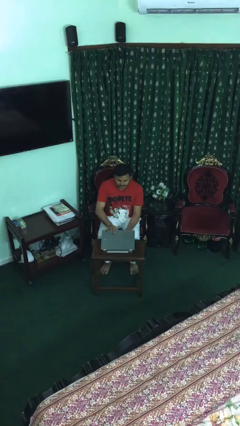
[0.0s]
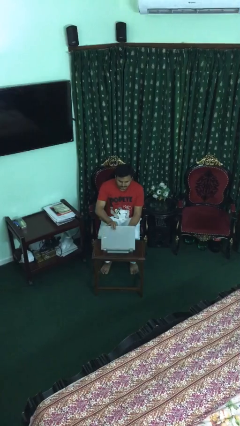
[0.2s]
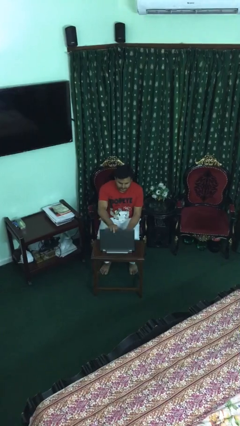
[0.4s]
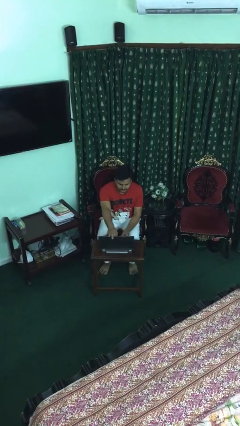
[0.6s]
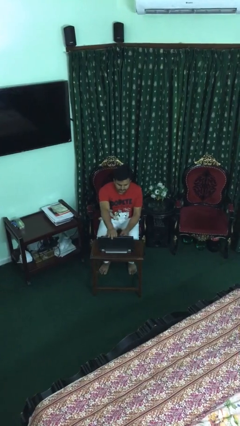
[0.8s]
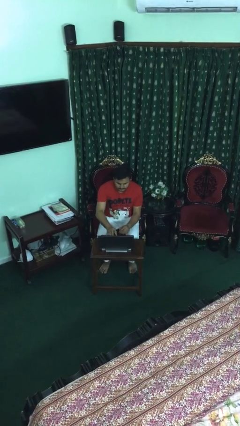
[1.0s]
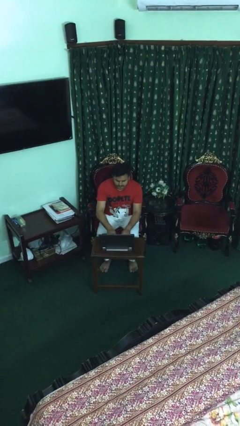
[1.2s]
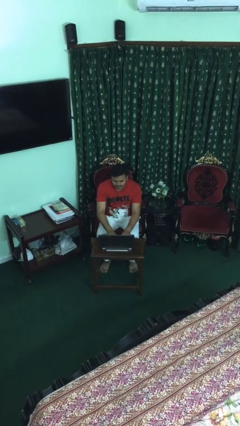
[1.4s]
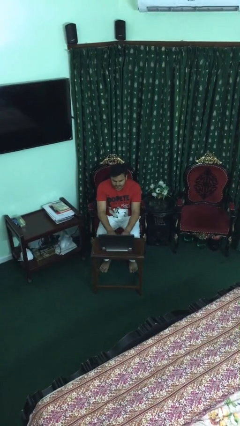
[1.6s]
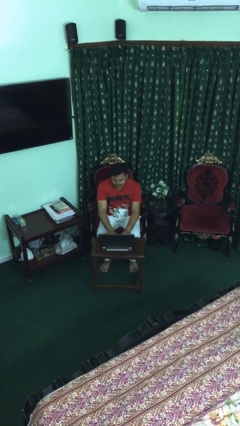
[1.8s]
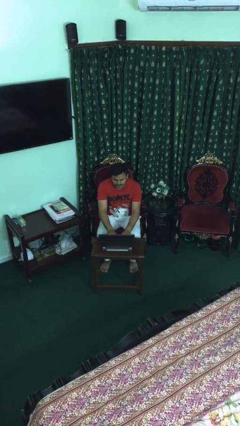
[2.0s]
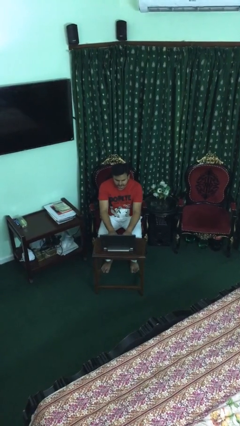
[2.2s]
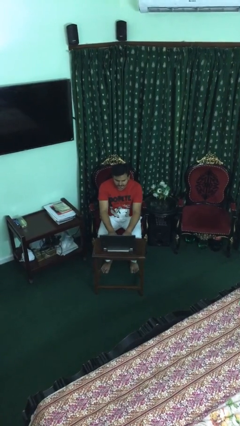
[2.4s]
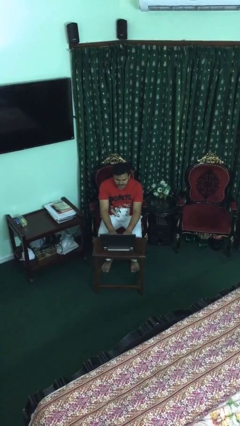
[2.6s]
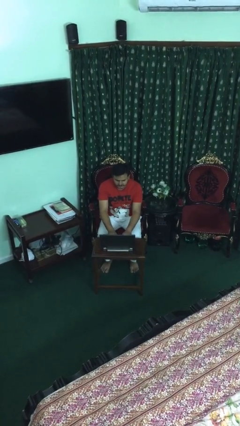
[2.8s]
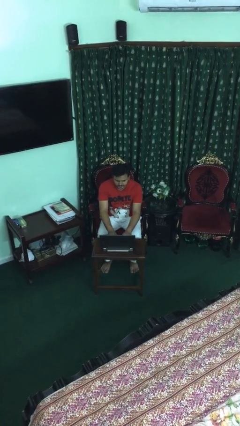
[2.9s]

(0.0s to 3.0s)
person interacts with laptop

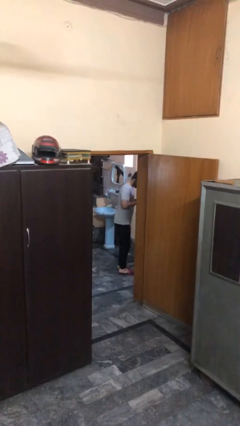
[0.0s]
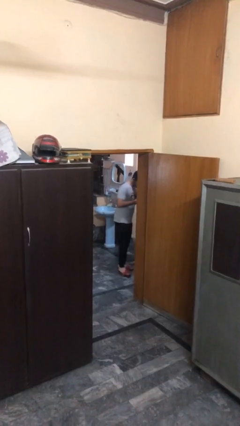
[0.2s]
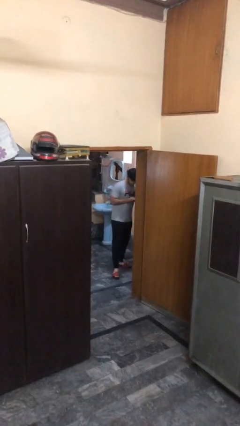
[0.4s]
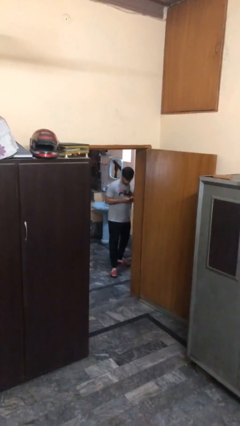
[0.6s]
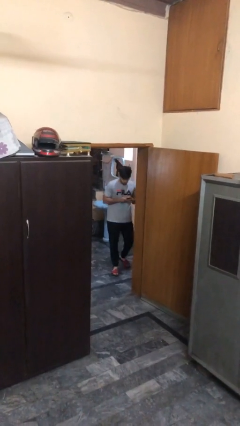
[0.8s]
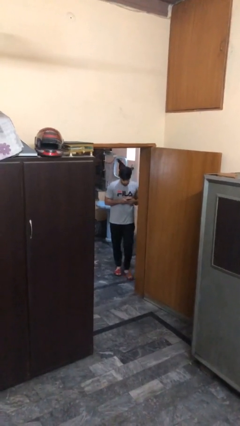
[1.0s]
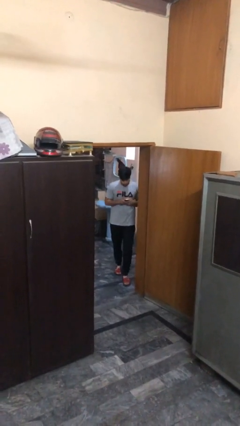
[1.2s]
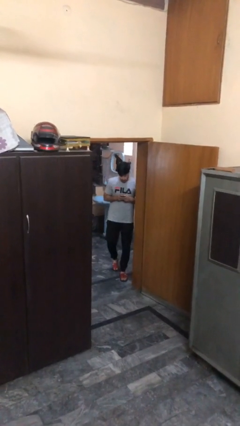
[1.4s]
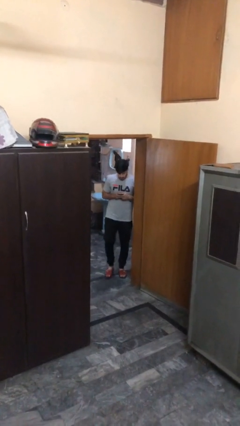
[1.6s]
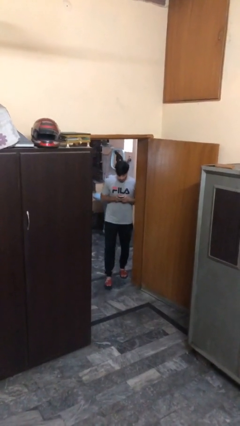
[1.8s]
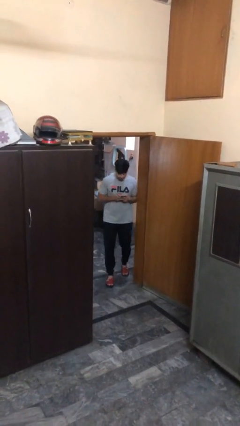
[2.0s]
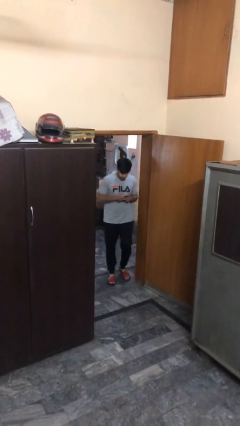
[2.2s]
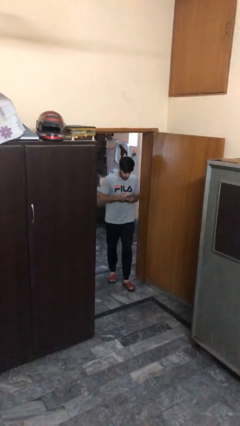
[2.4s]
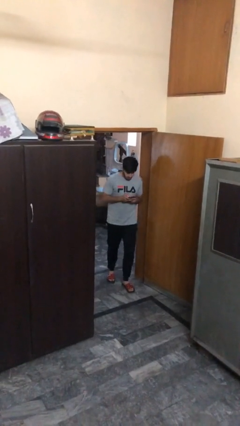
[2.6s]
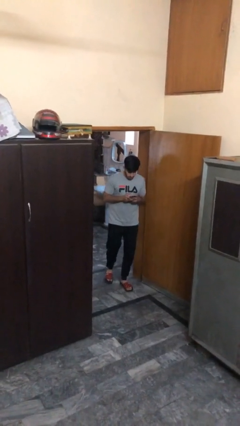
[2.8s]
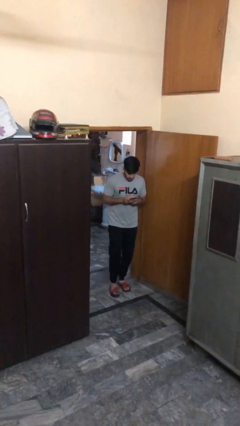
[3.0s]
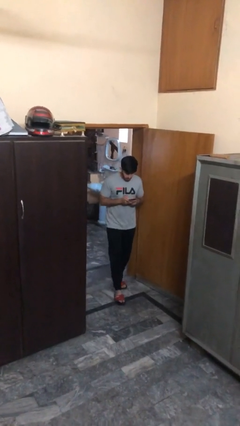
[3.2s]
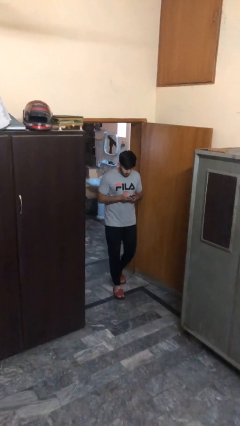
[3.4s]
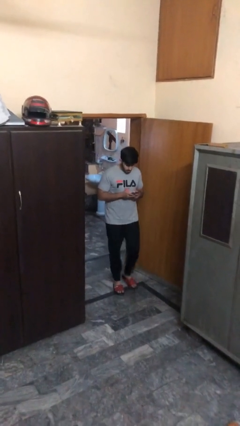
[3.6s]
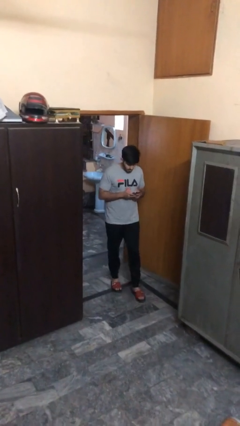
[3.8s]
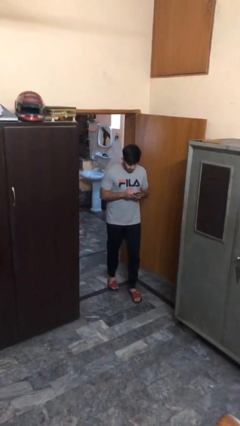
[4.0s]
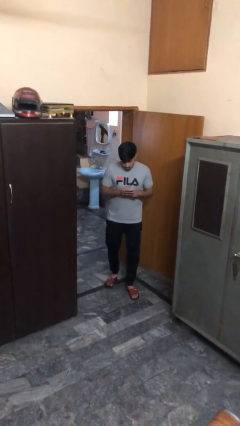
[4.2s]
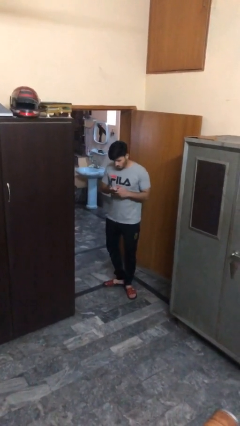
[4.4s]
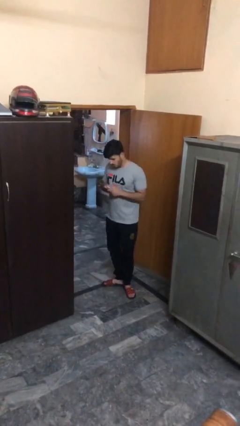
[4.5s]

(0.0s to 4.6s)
person enters scene through structure

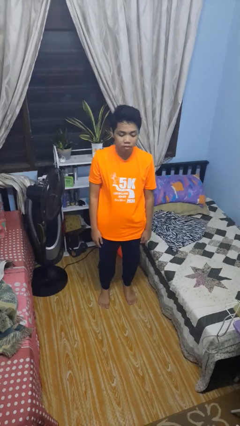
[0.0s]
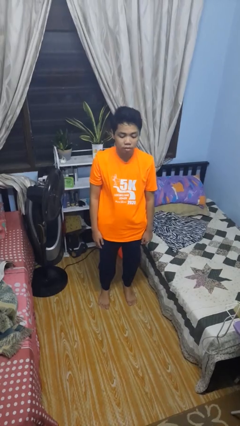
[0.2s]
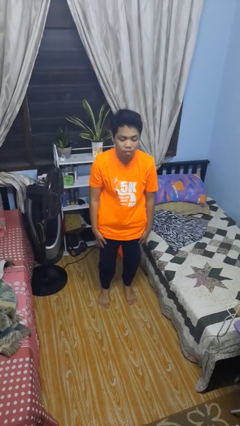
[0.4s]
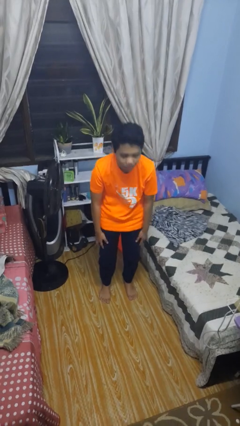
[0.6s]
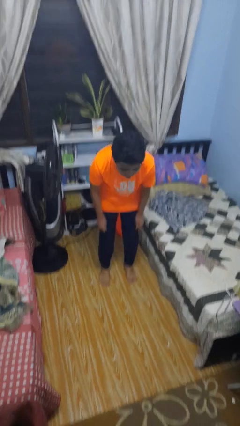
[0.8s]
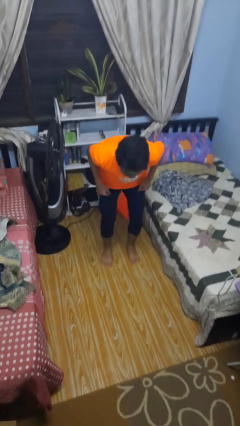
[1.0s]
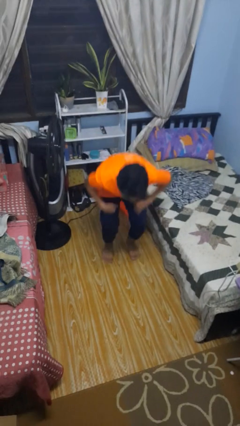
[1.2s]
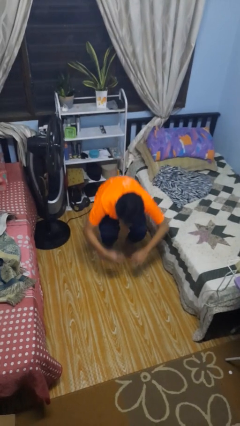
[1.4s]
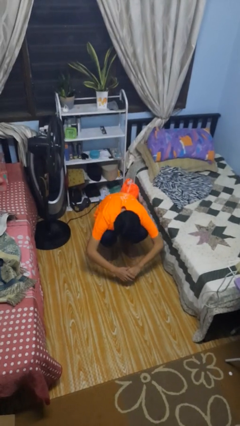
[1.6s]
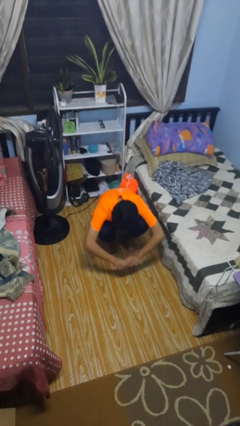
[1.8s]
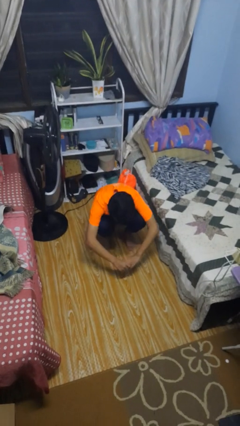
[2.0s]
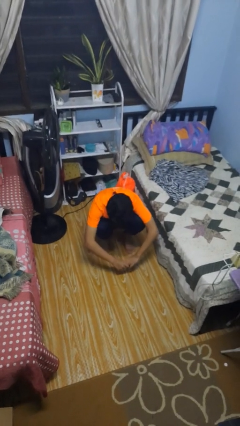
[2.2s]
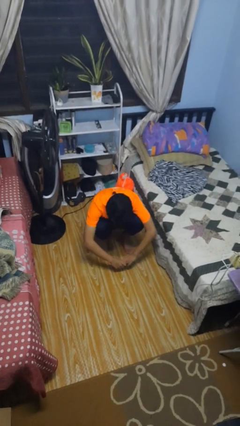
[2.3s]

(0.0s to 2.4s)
person squats

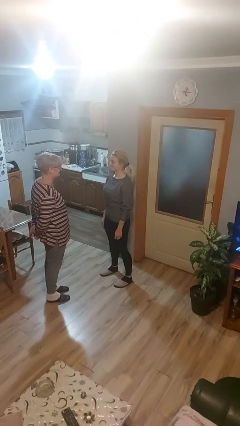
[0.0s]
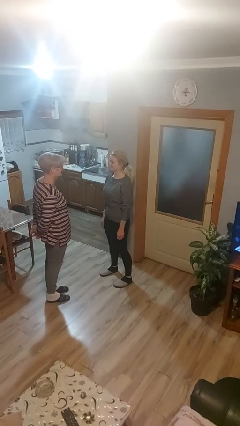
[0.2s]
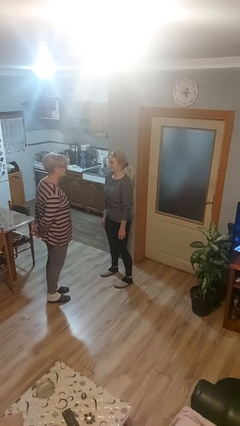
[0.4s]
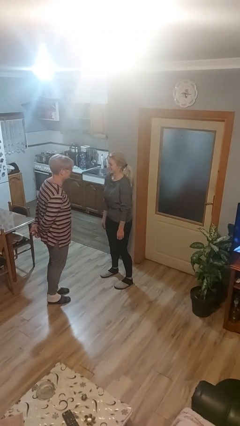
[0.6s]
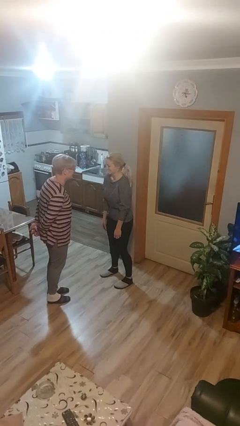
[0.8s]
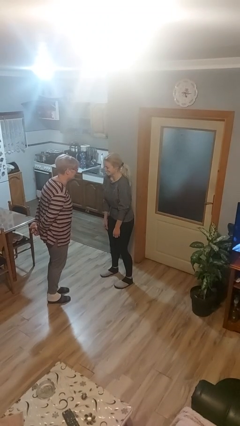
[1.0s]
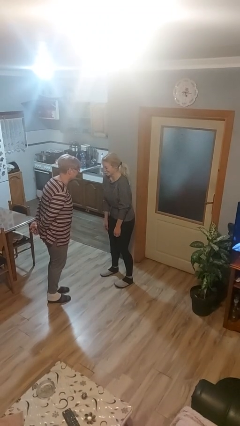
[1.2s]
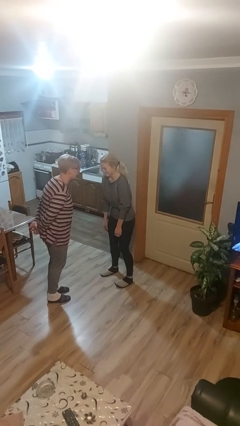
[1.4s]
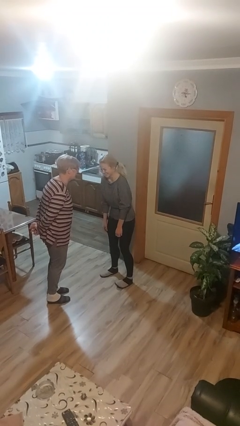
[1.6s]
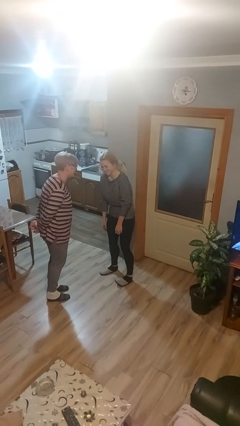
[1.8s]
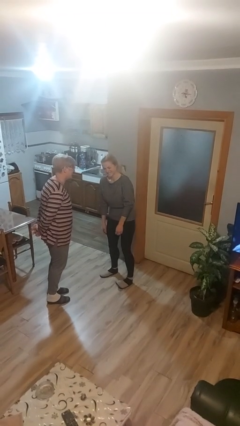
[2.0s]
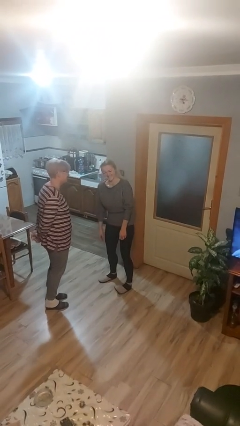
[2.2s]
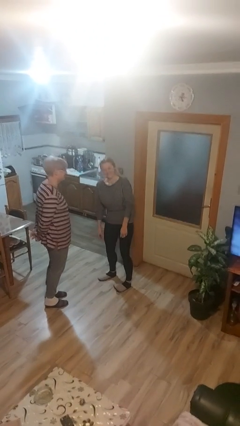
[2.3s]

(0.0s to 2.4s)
person laughs with person

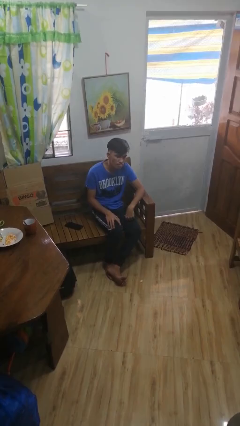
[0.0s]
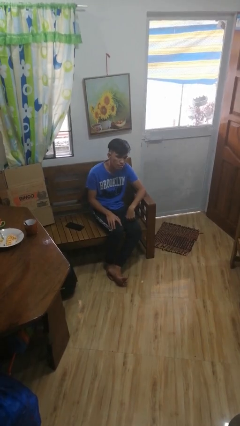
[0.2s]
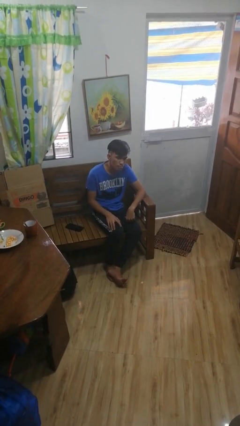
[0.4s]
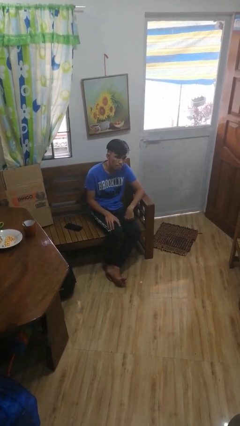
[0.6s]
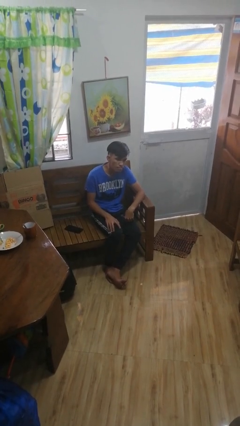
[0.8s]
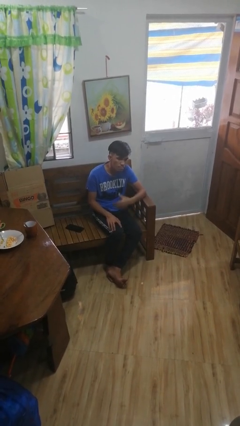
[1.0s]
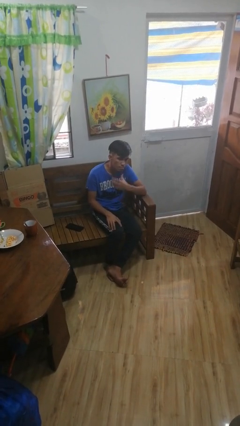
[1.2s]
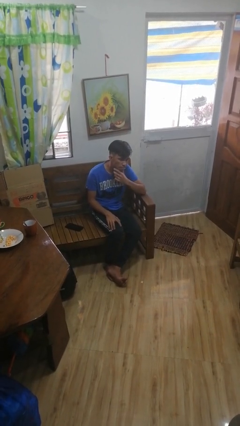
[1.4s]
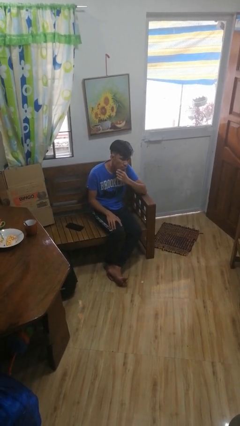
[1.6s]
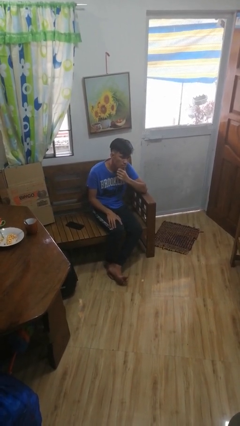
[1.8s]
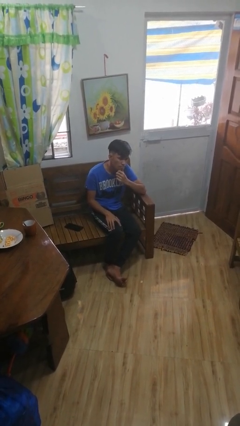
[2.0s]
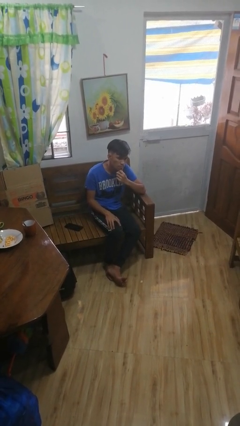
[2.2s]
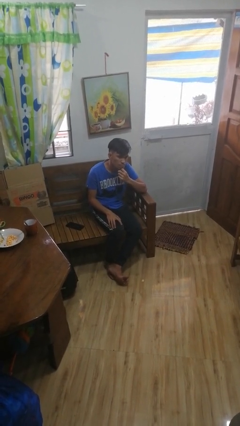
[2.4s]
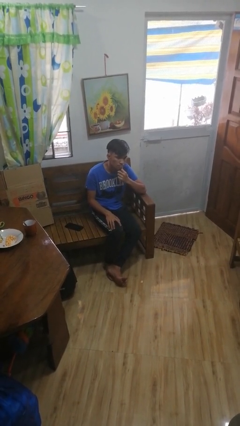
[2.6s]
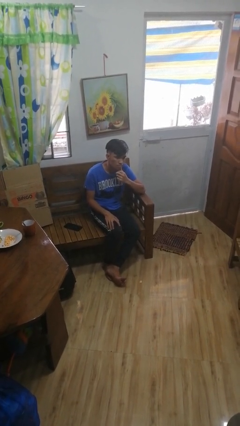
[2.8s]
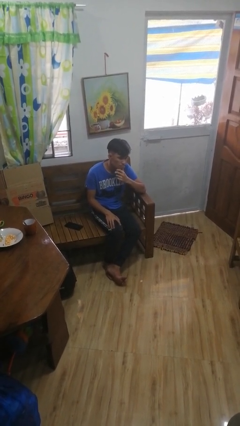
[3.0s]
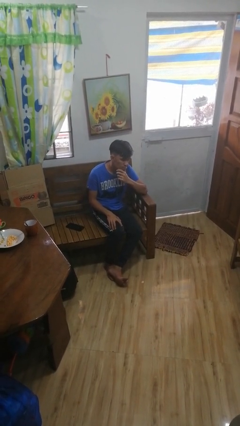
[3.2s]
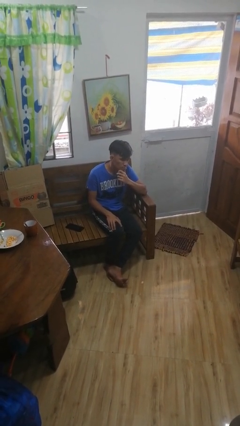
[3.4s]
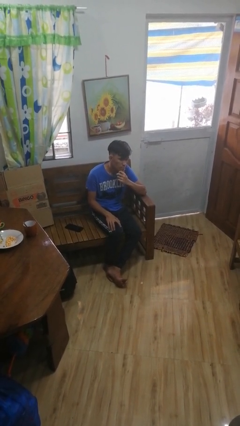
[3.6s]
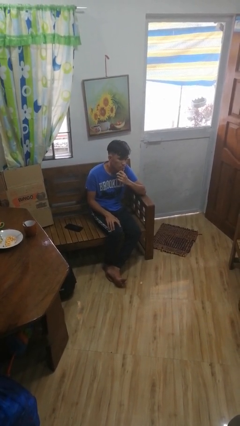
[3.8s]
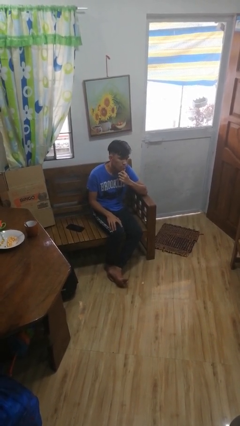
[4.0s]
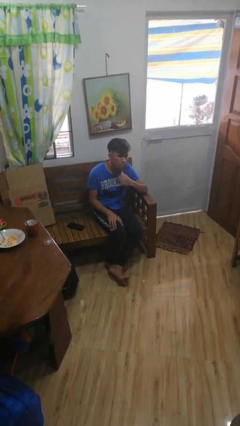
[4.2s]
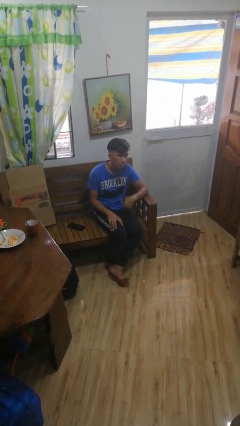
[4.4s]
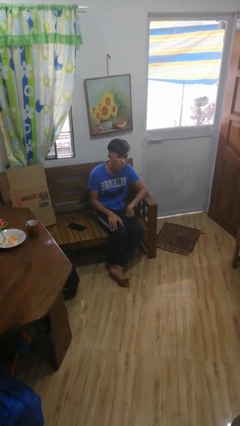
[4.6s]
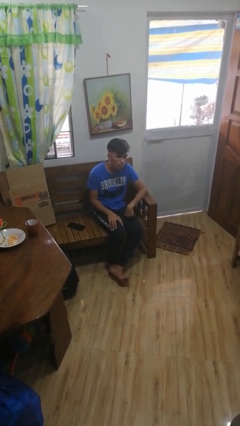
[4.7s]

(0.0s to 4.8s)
person strokes chin

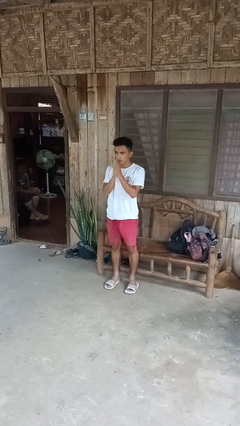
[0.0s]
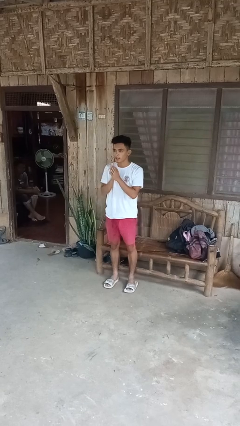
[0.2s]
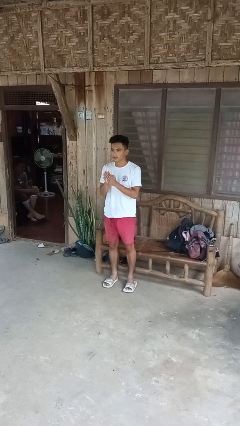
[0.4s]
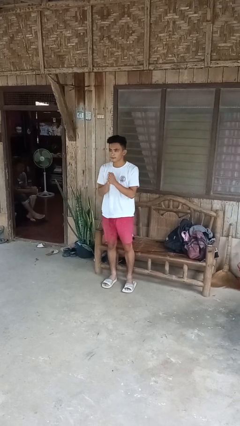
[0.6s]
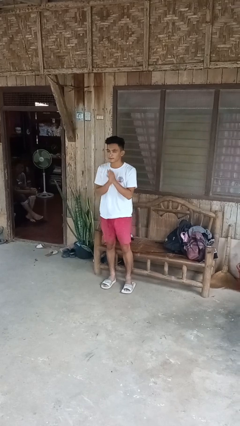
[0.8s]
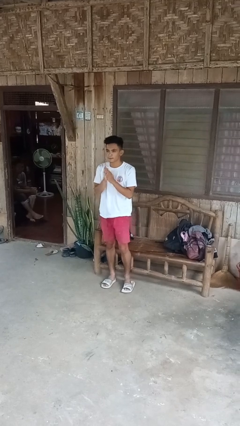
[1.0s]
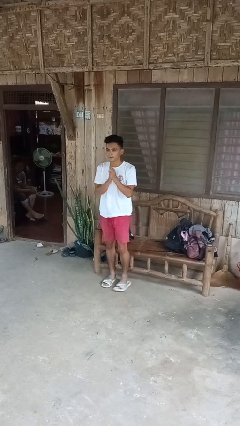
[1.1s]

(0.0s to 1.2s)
person blows into hands
